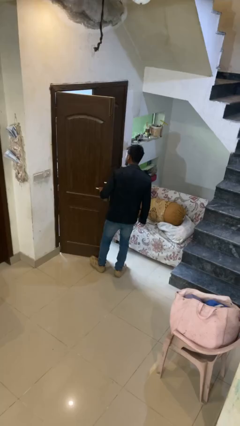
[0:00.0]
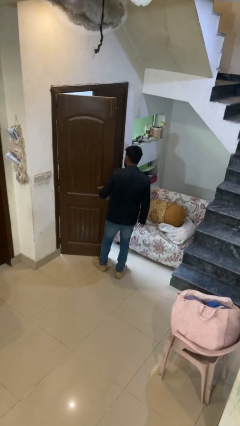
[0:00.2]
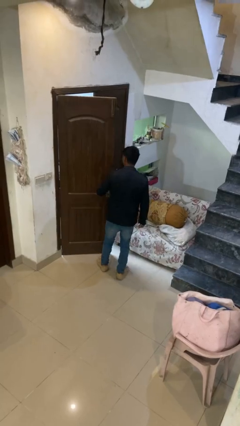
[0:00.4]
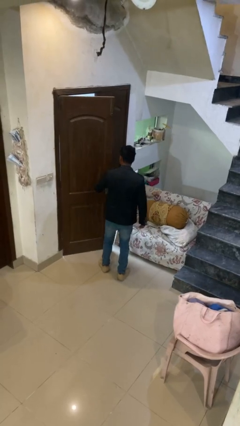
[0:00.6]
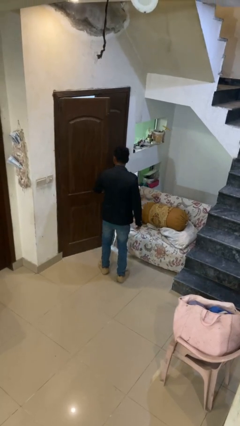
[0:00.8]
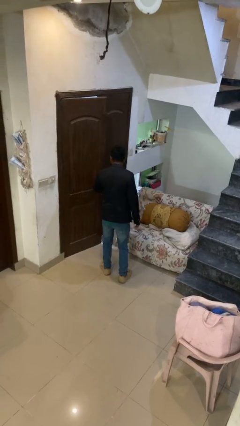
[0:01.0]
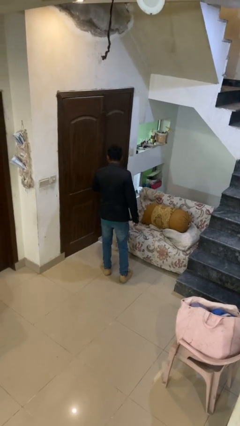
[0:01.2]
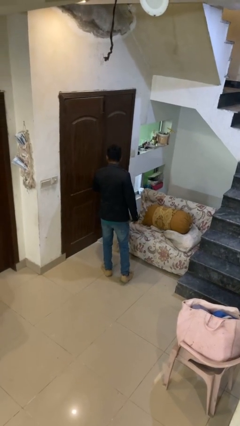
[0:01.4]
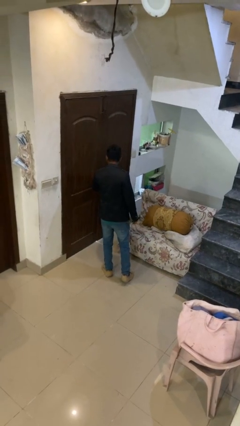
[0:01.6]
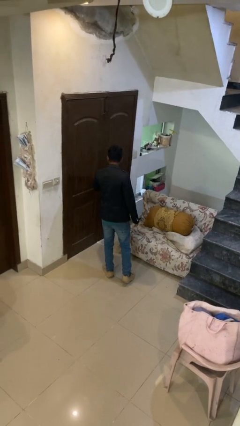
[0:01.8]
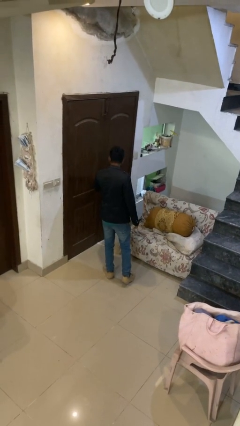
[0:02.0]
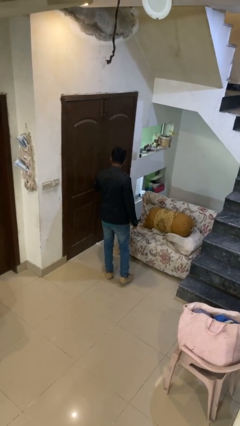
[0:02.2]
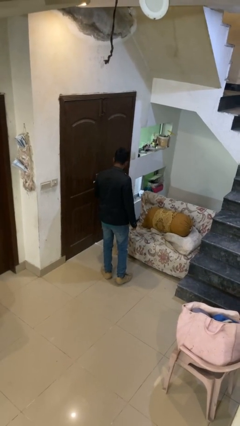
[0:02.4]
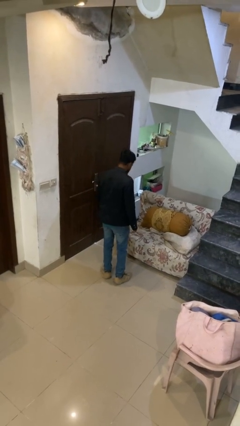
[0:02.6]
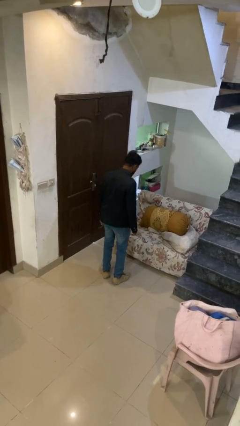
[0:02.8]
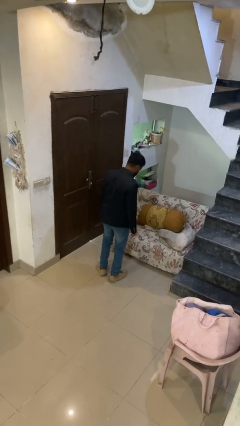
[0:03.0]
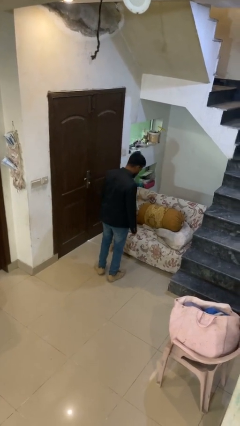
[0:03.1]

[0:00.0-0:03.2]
person closes facility door

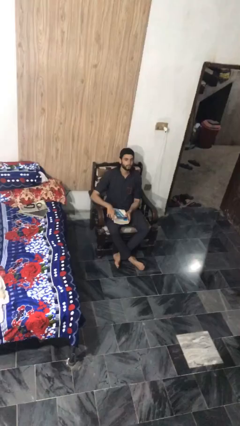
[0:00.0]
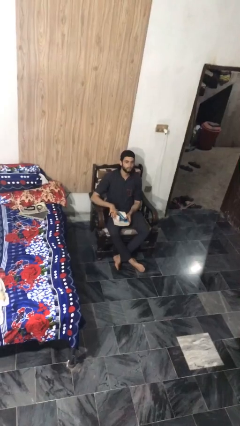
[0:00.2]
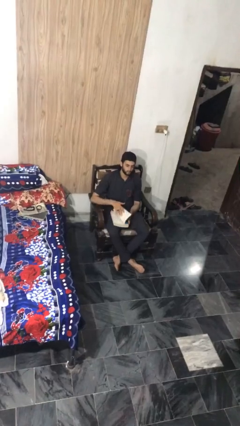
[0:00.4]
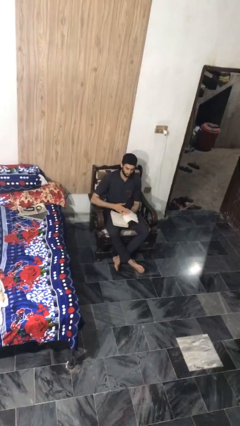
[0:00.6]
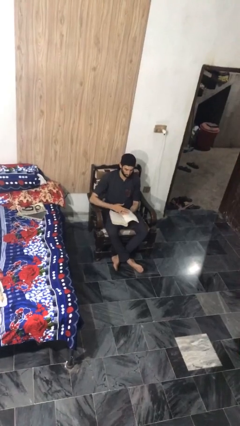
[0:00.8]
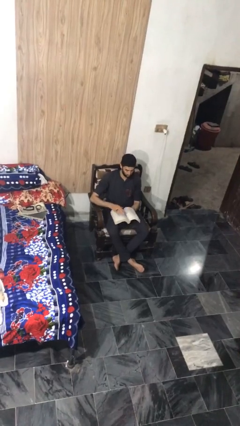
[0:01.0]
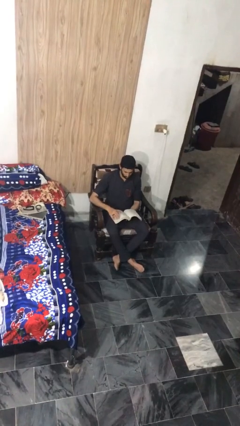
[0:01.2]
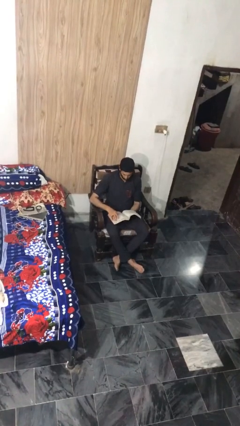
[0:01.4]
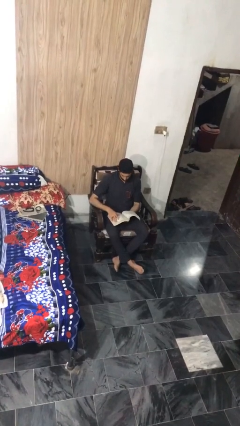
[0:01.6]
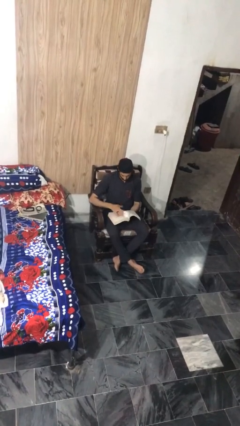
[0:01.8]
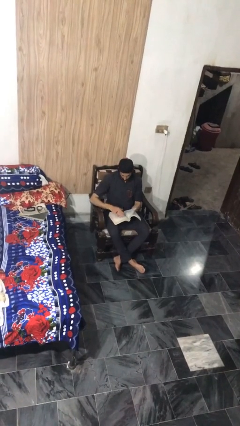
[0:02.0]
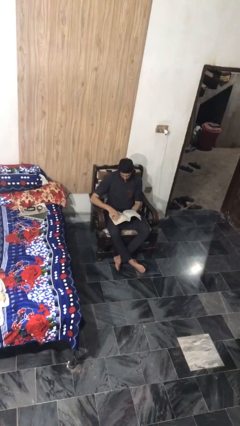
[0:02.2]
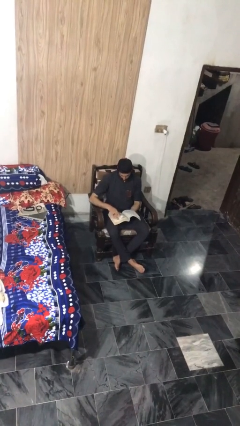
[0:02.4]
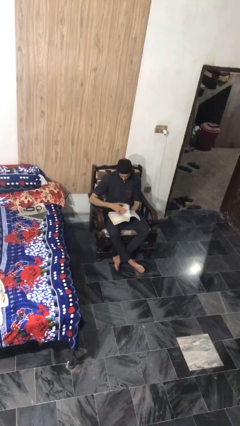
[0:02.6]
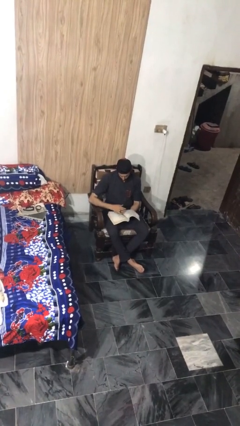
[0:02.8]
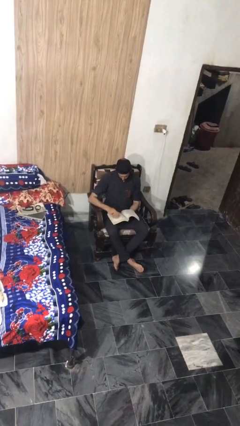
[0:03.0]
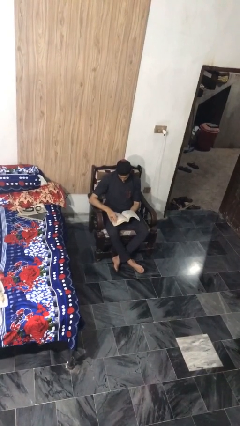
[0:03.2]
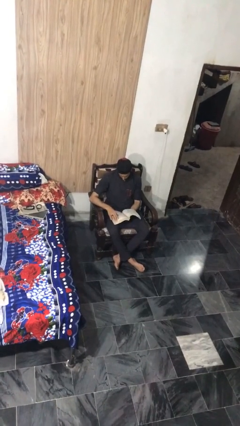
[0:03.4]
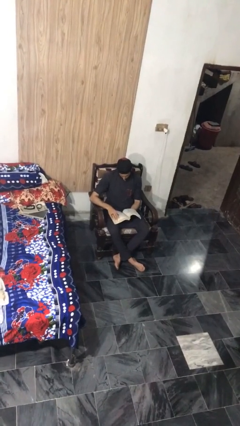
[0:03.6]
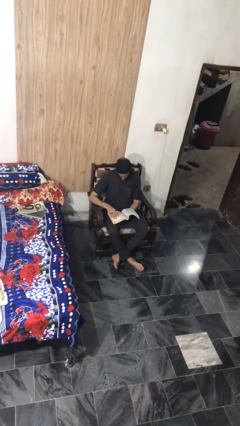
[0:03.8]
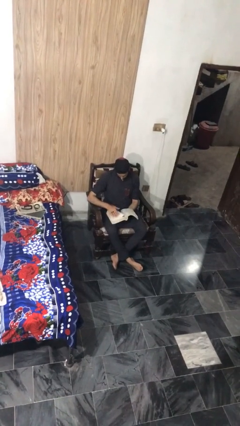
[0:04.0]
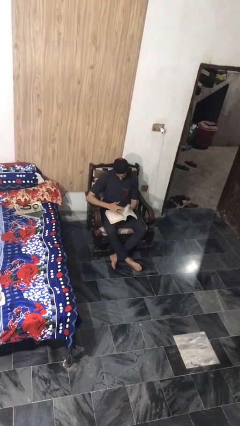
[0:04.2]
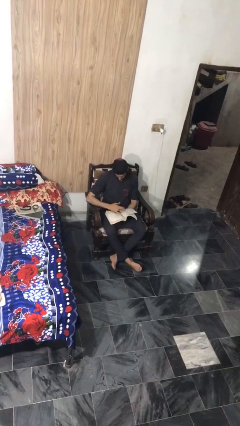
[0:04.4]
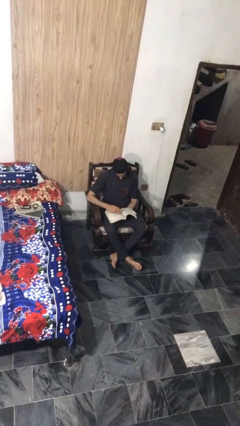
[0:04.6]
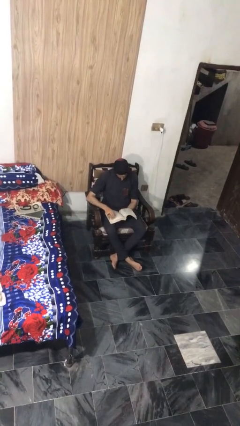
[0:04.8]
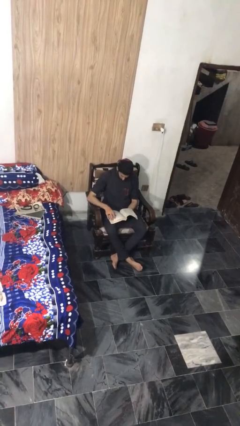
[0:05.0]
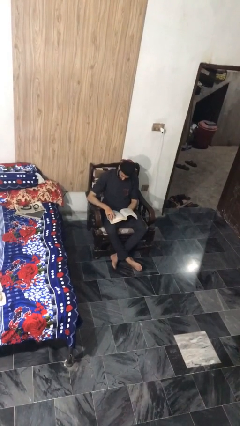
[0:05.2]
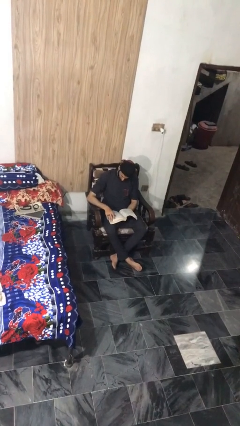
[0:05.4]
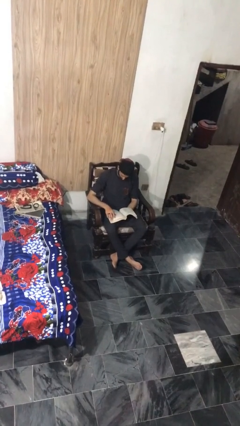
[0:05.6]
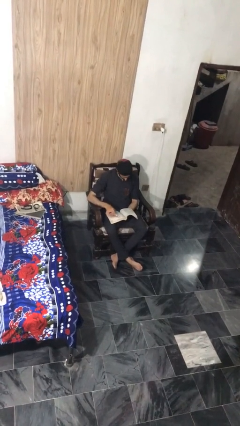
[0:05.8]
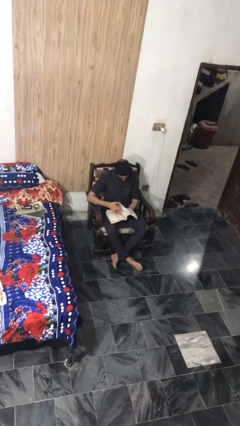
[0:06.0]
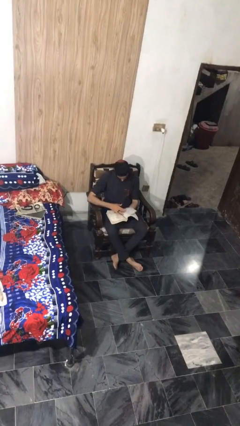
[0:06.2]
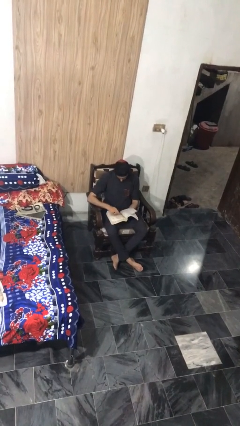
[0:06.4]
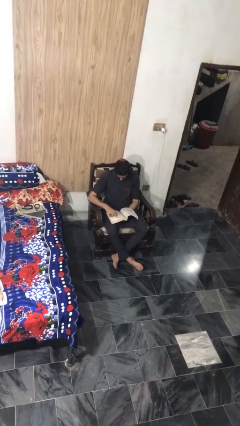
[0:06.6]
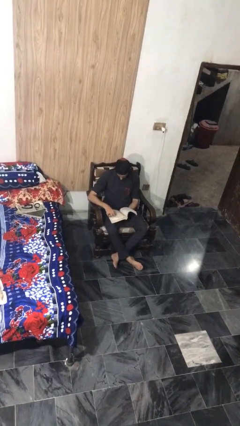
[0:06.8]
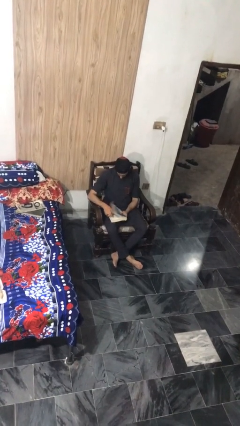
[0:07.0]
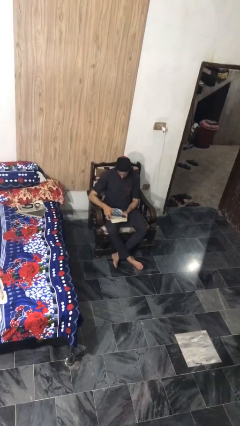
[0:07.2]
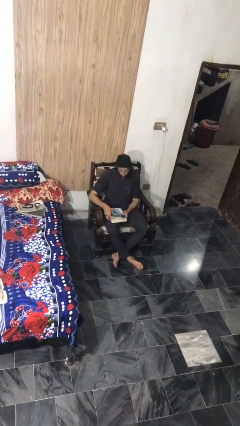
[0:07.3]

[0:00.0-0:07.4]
person reads book

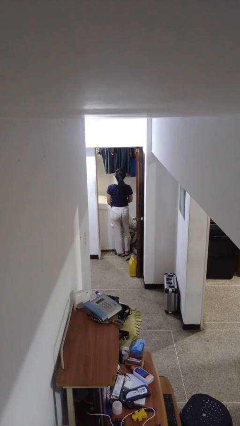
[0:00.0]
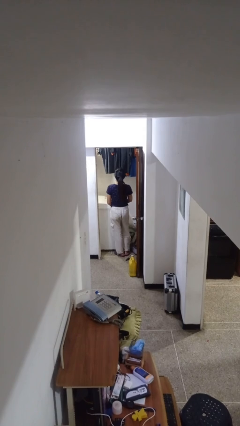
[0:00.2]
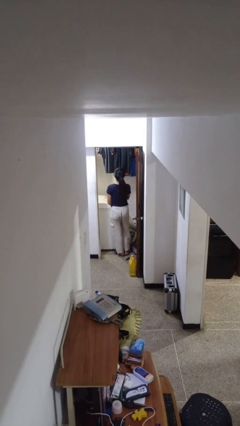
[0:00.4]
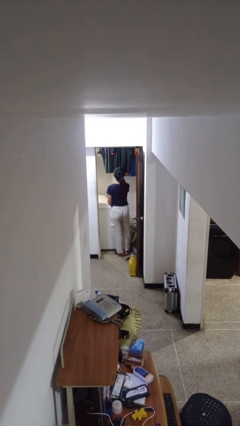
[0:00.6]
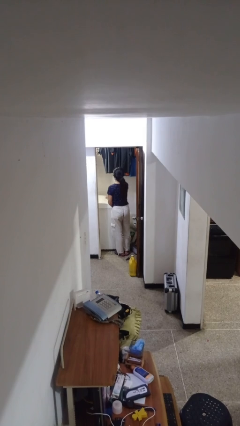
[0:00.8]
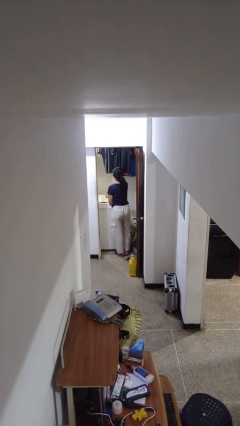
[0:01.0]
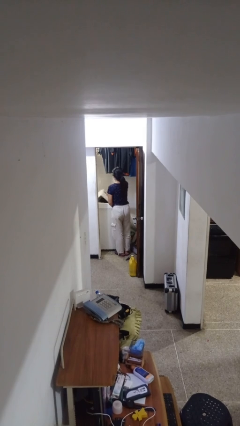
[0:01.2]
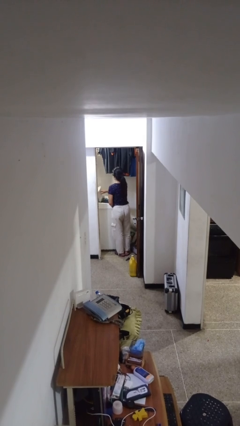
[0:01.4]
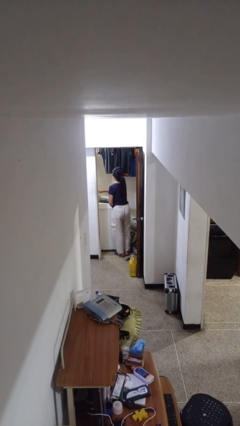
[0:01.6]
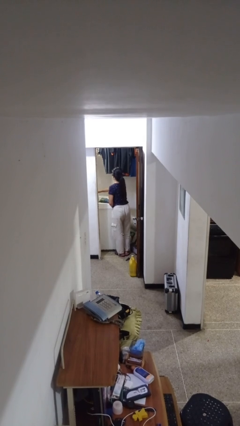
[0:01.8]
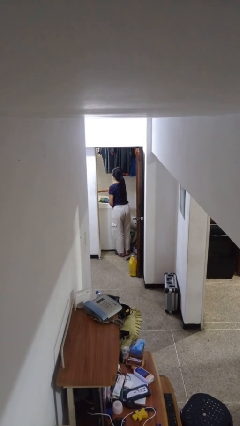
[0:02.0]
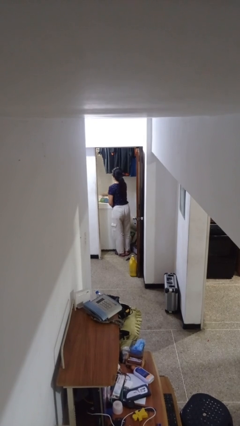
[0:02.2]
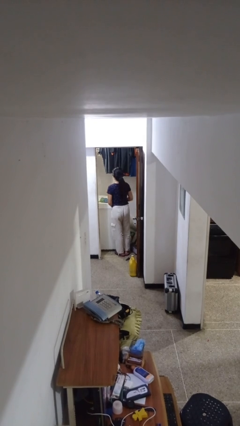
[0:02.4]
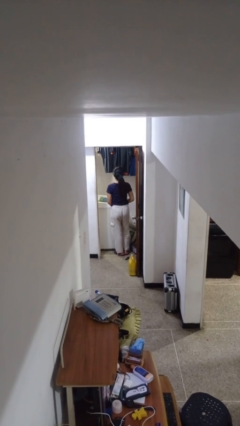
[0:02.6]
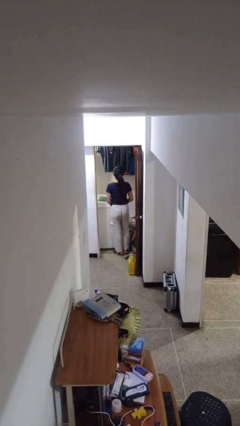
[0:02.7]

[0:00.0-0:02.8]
person opens clothes washer

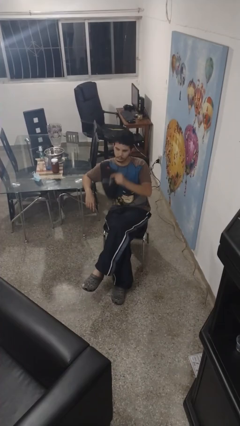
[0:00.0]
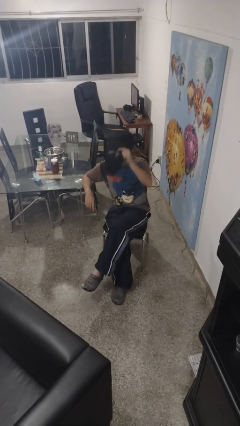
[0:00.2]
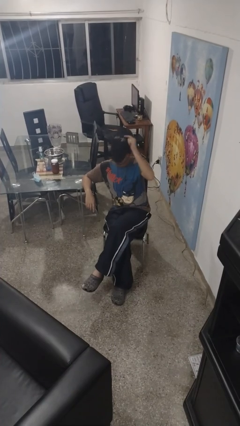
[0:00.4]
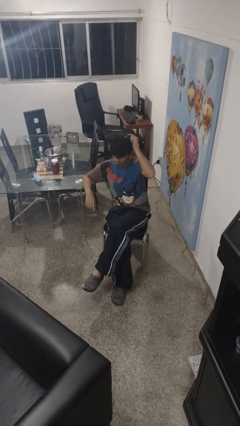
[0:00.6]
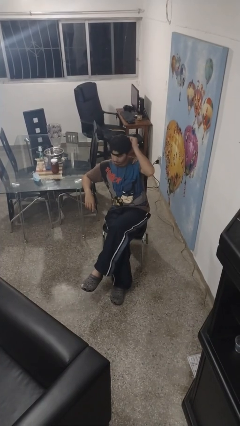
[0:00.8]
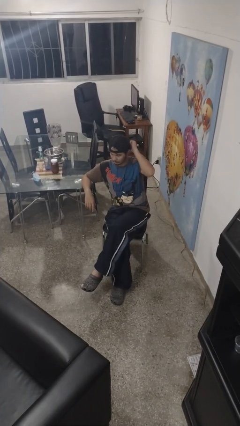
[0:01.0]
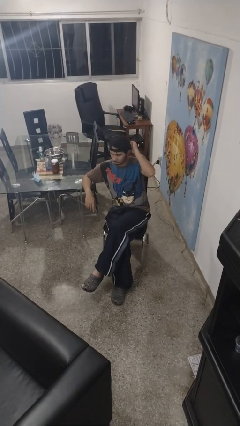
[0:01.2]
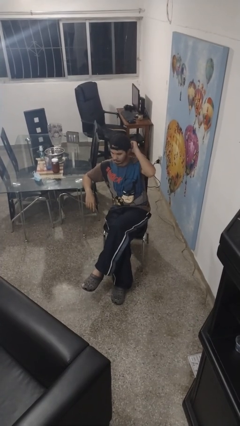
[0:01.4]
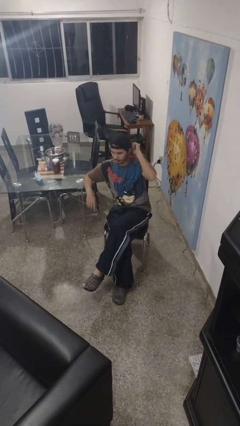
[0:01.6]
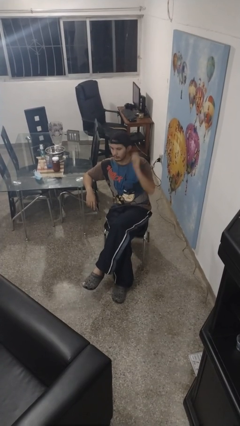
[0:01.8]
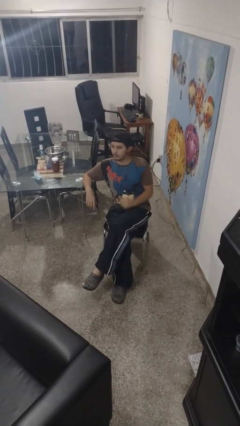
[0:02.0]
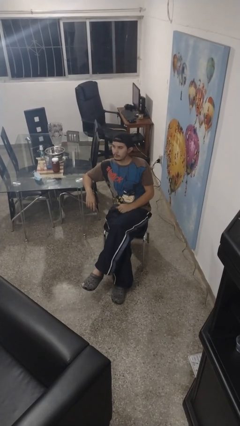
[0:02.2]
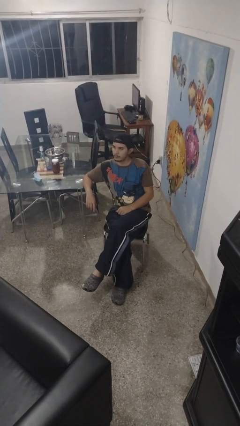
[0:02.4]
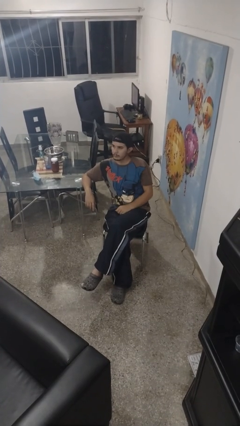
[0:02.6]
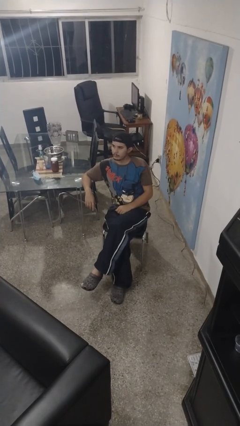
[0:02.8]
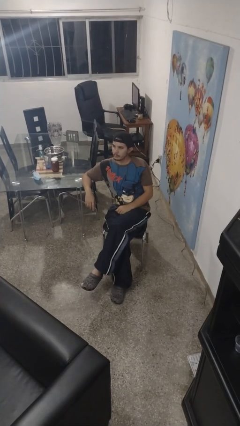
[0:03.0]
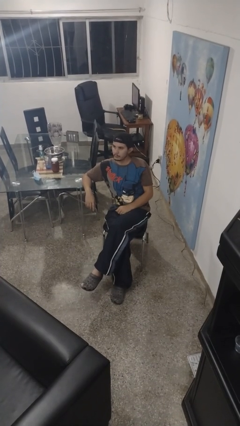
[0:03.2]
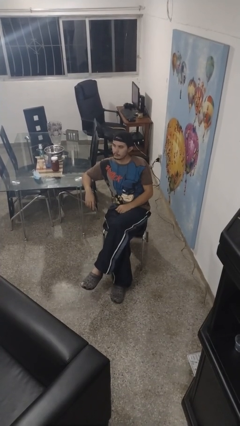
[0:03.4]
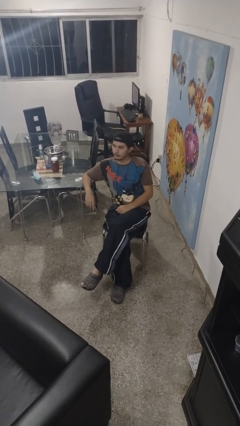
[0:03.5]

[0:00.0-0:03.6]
person puts on hat

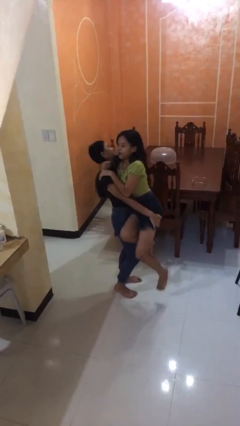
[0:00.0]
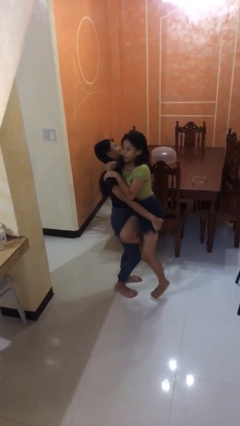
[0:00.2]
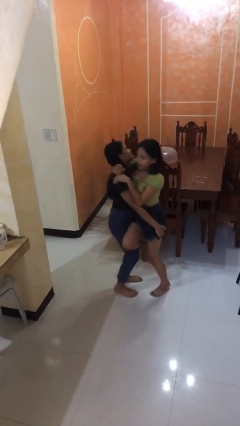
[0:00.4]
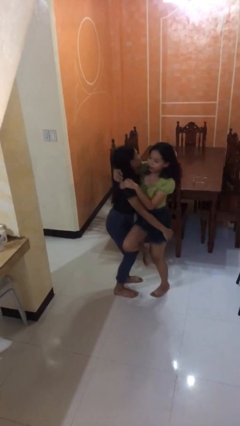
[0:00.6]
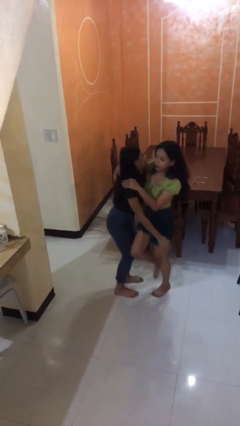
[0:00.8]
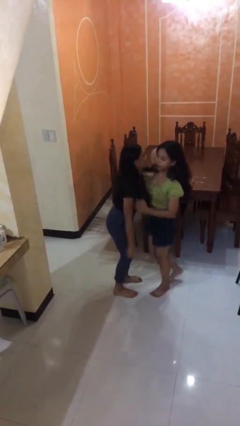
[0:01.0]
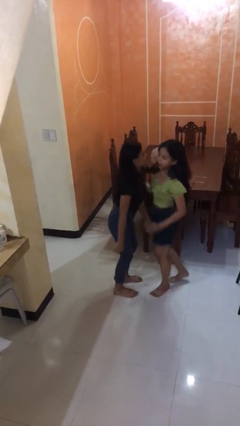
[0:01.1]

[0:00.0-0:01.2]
person puts down person
